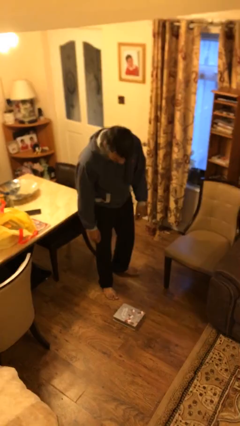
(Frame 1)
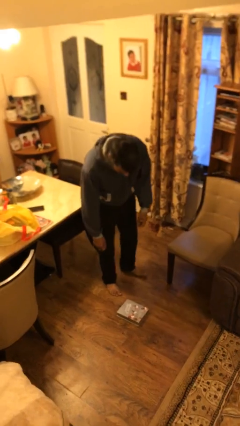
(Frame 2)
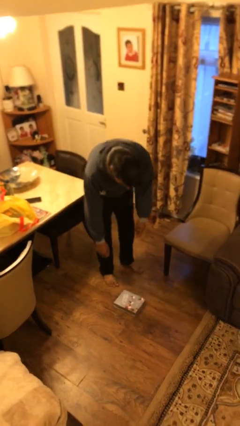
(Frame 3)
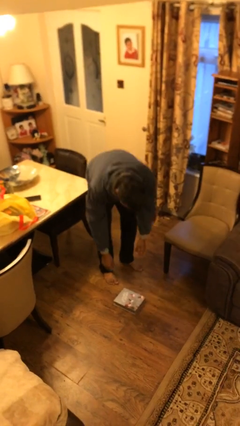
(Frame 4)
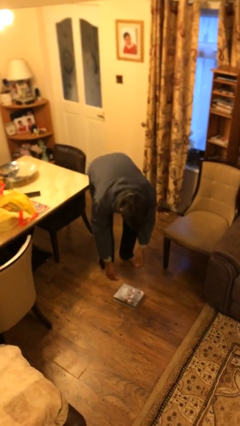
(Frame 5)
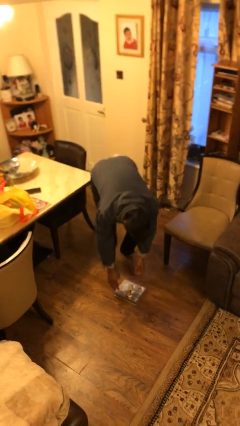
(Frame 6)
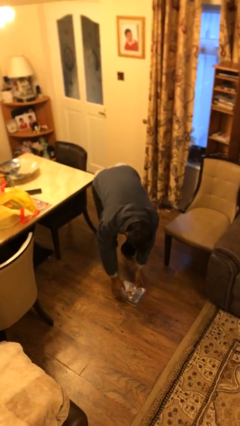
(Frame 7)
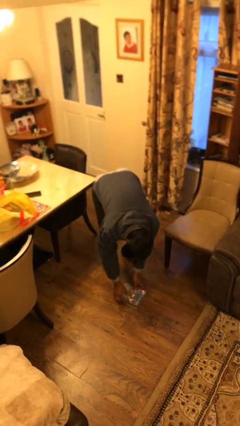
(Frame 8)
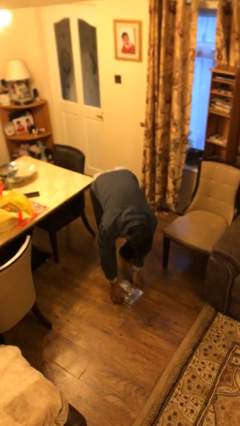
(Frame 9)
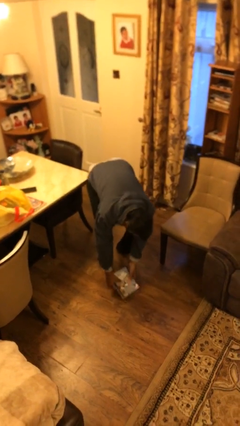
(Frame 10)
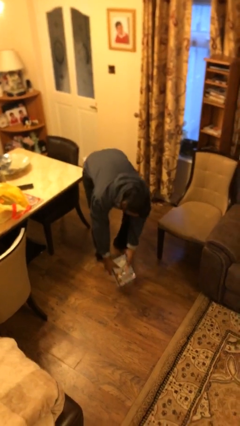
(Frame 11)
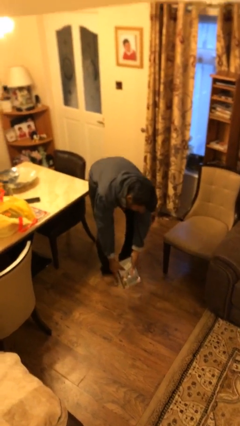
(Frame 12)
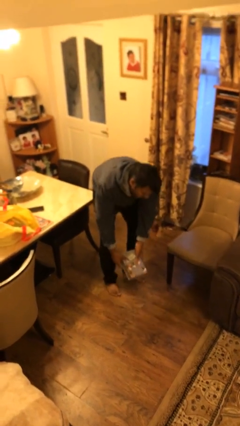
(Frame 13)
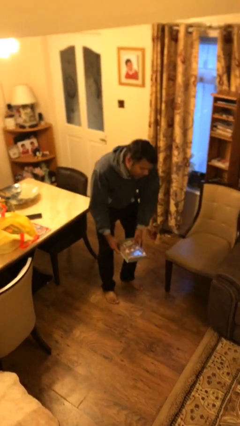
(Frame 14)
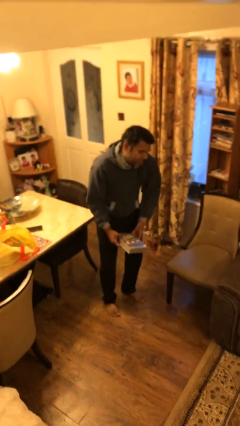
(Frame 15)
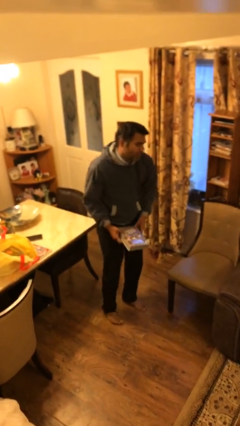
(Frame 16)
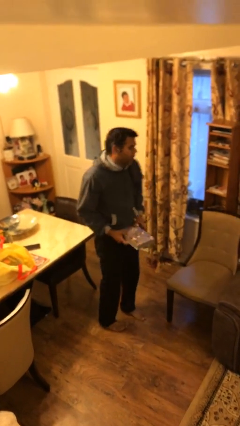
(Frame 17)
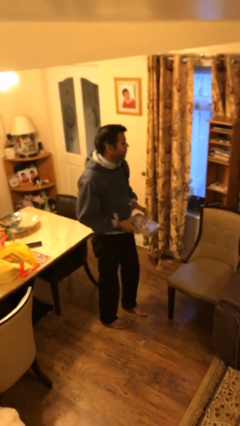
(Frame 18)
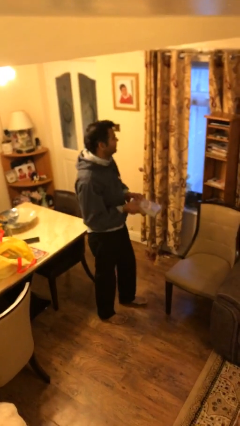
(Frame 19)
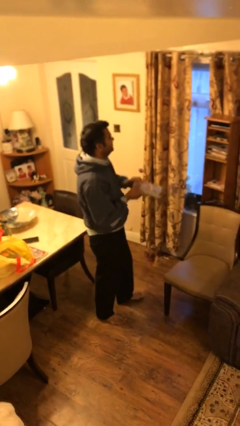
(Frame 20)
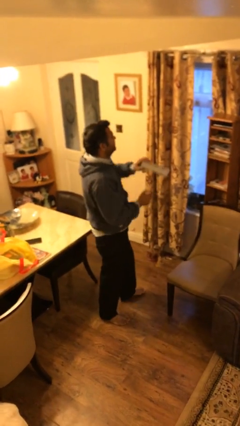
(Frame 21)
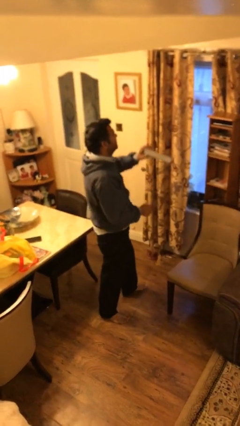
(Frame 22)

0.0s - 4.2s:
person picks up object from floor

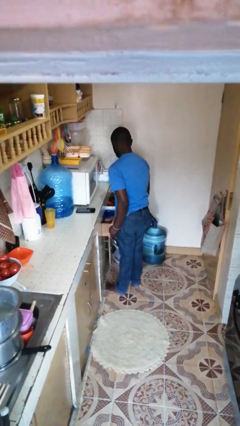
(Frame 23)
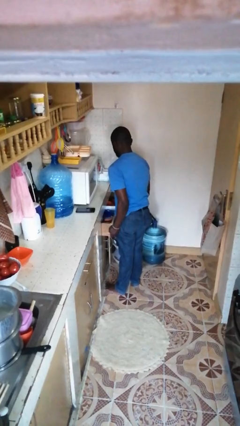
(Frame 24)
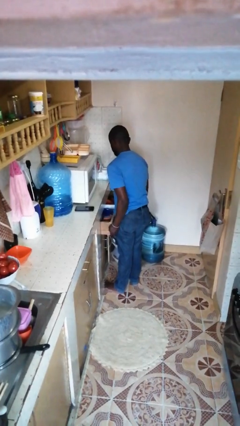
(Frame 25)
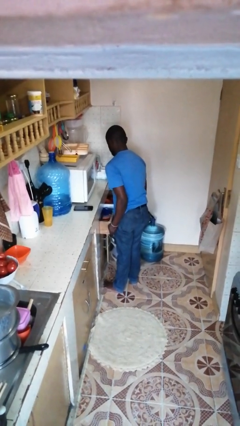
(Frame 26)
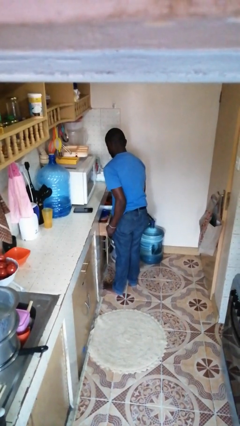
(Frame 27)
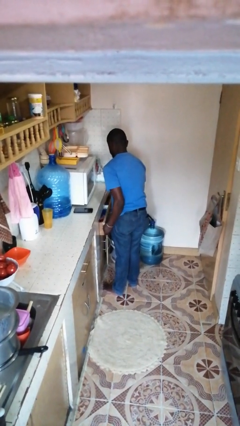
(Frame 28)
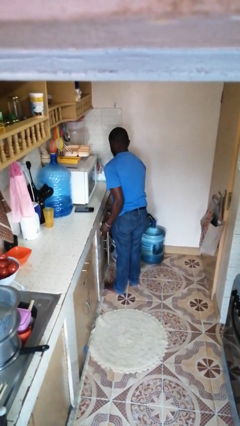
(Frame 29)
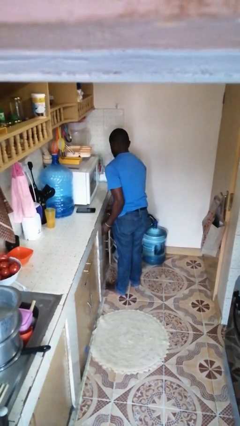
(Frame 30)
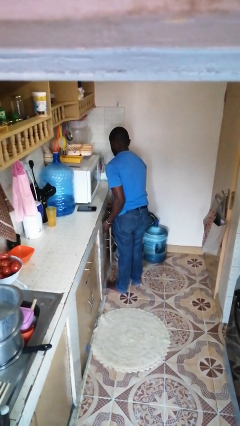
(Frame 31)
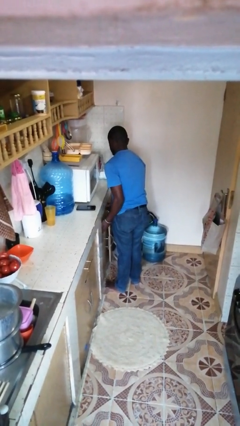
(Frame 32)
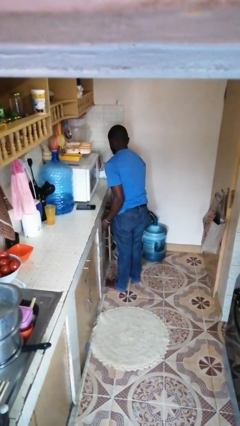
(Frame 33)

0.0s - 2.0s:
person closes kitchen drawer

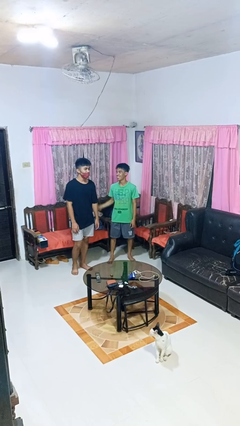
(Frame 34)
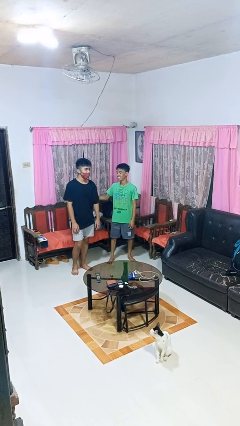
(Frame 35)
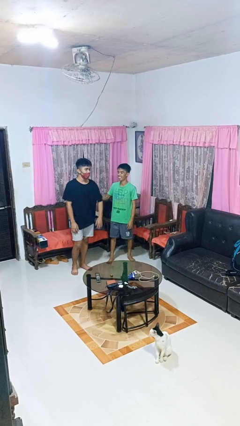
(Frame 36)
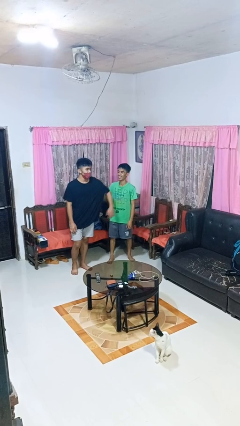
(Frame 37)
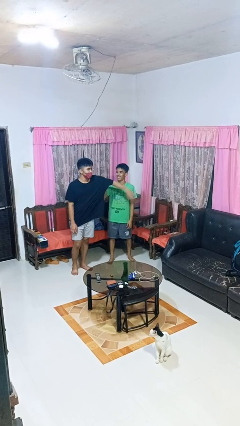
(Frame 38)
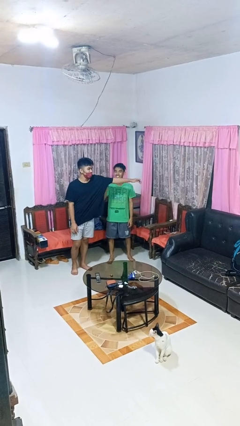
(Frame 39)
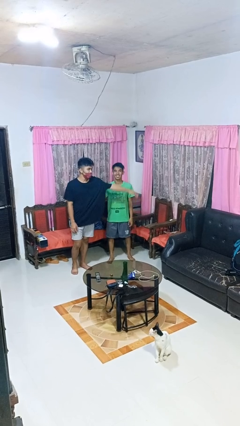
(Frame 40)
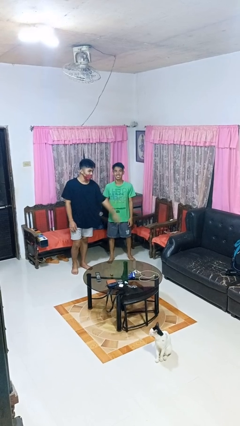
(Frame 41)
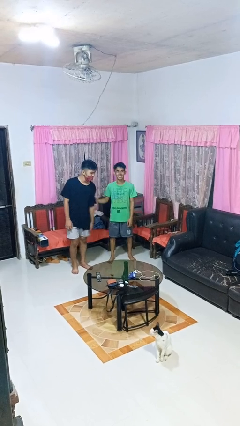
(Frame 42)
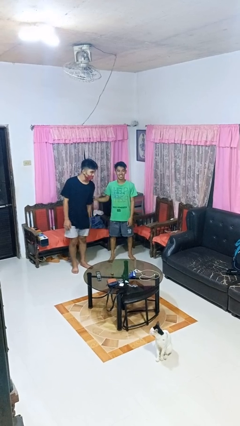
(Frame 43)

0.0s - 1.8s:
person grabs person by bicep

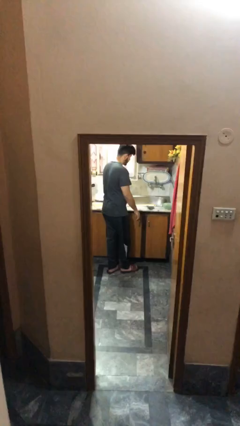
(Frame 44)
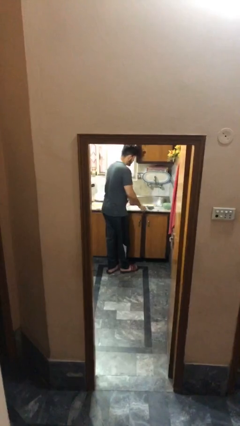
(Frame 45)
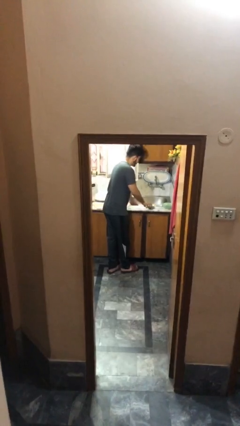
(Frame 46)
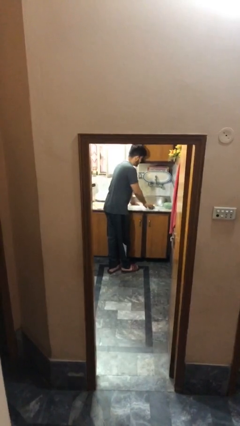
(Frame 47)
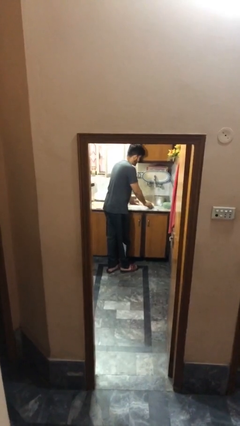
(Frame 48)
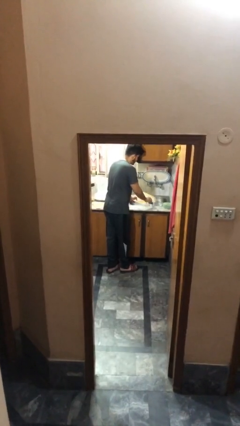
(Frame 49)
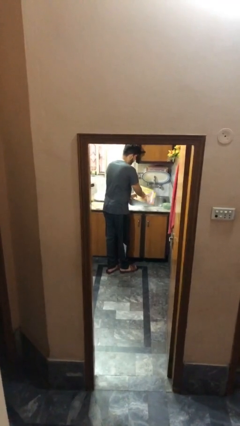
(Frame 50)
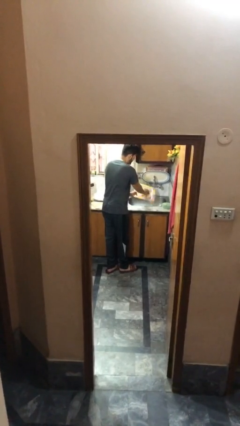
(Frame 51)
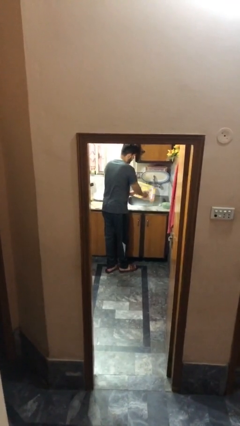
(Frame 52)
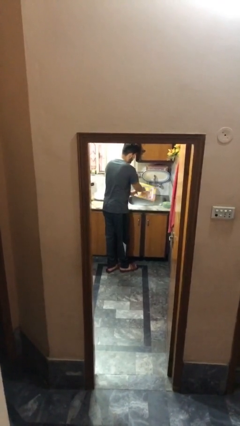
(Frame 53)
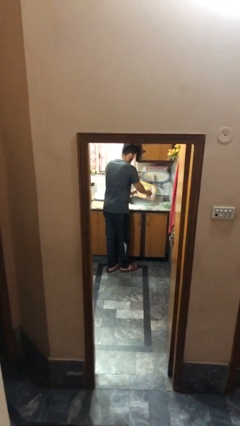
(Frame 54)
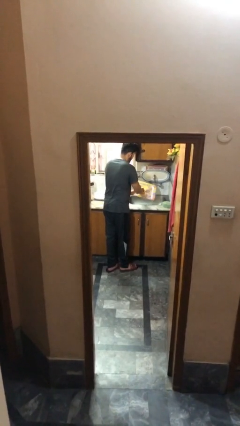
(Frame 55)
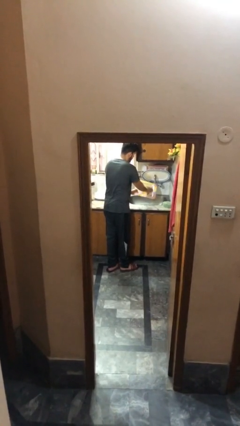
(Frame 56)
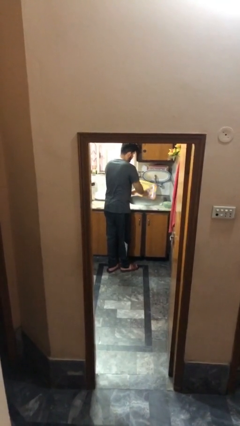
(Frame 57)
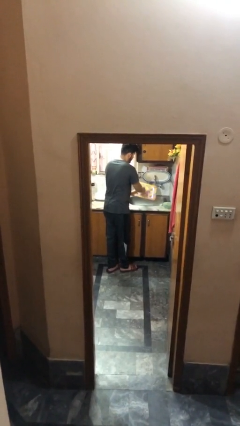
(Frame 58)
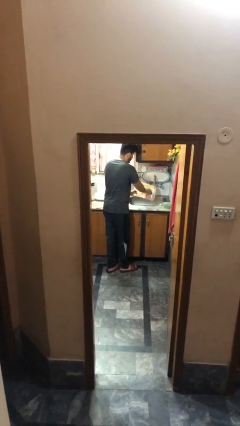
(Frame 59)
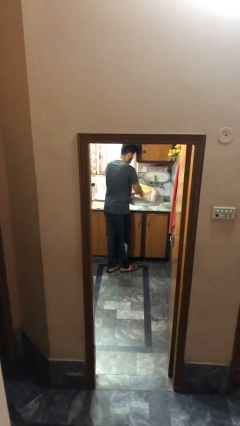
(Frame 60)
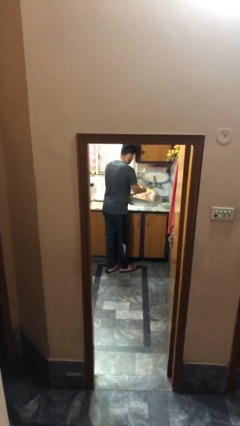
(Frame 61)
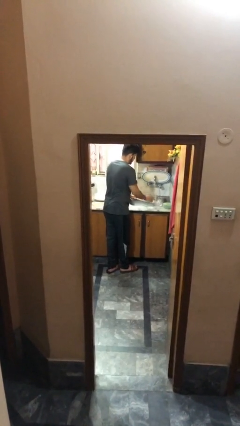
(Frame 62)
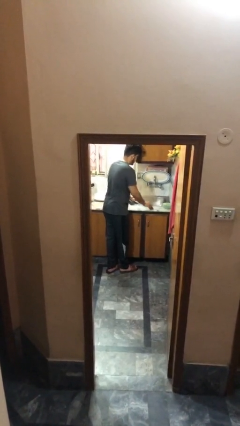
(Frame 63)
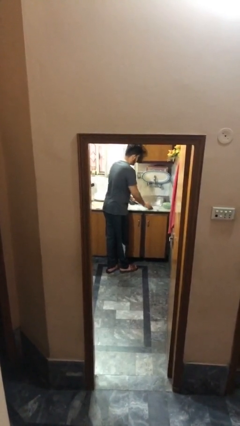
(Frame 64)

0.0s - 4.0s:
person washes dish

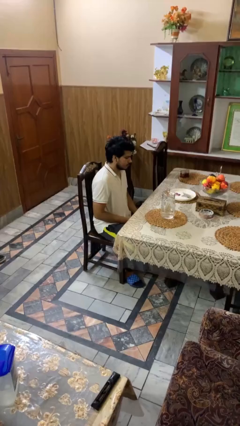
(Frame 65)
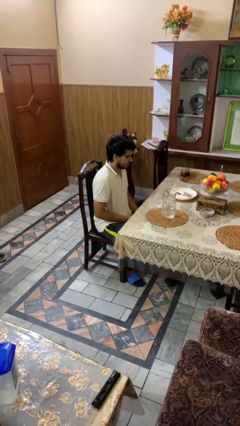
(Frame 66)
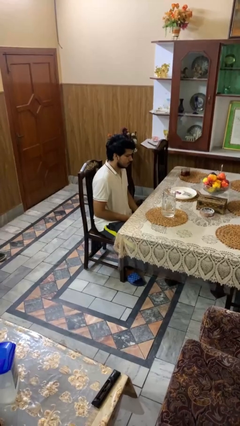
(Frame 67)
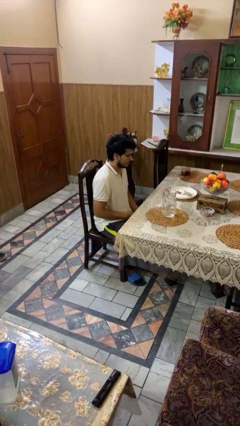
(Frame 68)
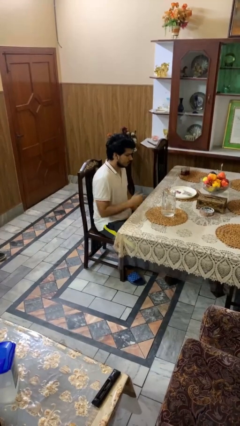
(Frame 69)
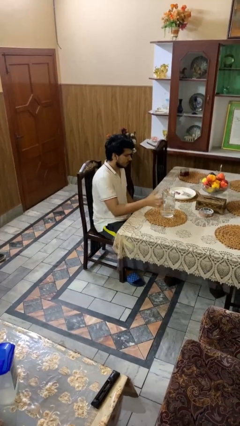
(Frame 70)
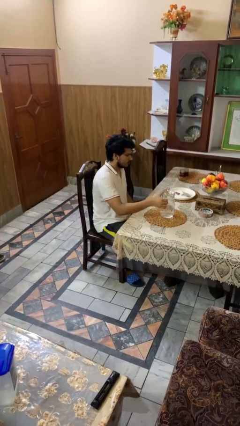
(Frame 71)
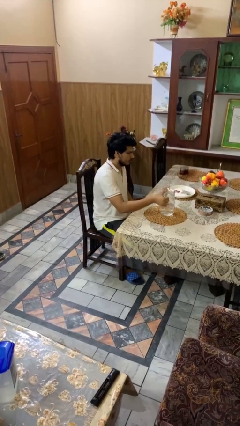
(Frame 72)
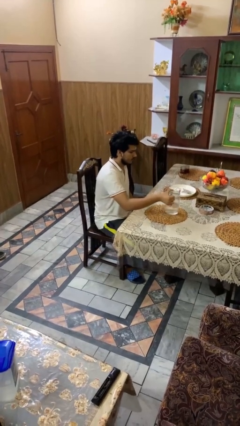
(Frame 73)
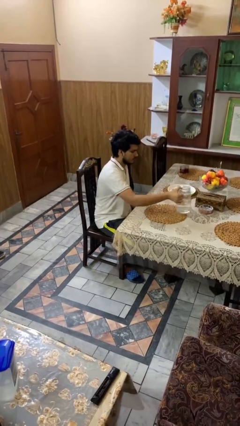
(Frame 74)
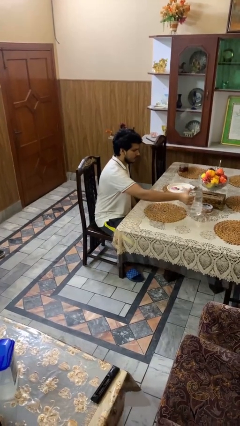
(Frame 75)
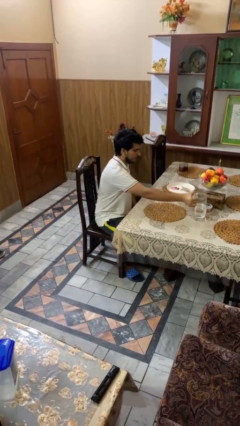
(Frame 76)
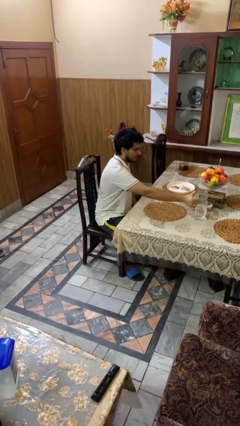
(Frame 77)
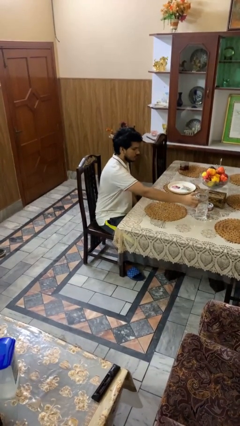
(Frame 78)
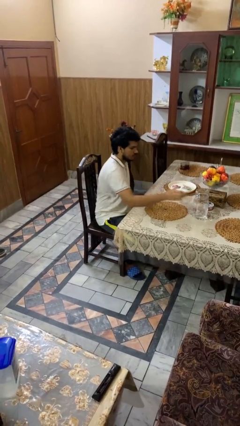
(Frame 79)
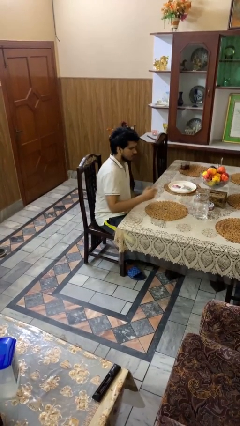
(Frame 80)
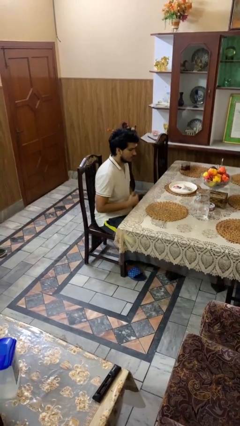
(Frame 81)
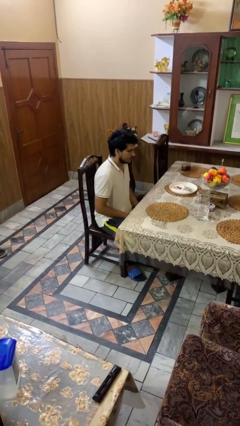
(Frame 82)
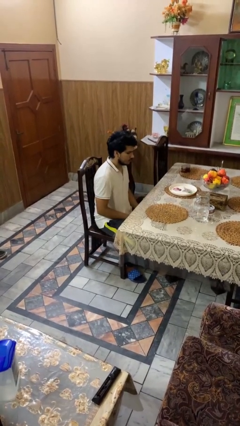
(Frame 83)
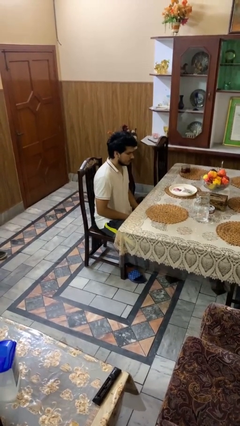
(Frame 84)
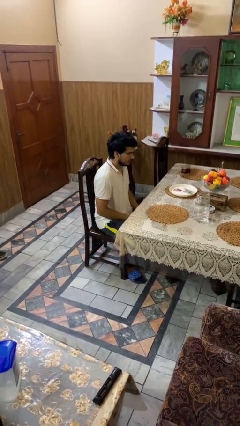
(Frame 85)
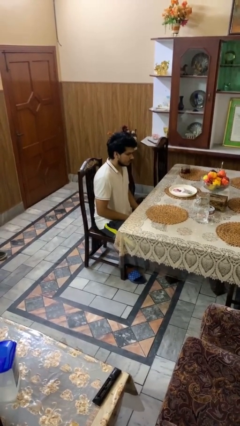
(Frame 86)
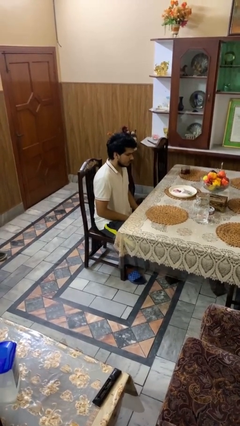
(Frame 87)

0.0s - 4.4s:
person sets table

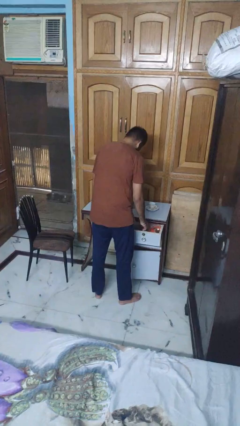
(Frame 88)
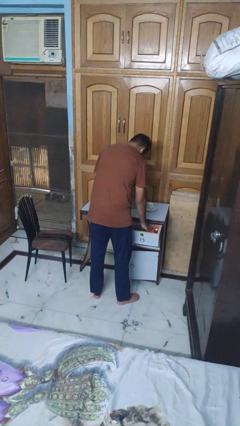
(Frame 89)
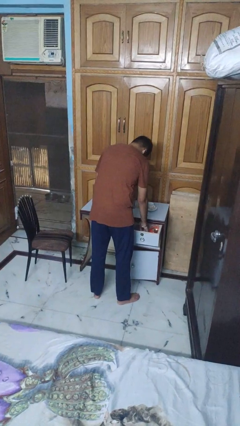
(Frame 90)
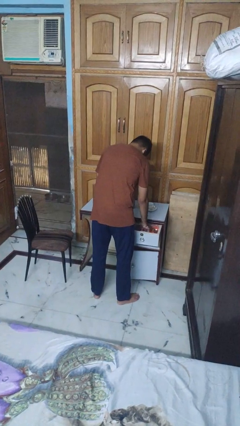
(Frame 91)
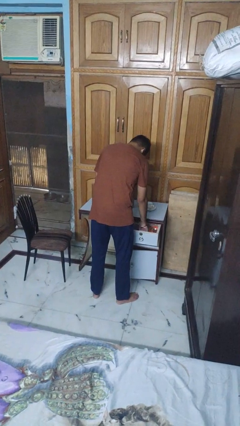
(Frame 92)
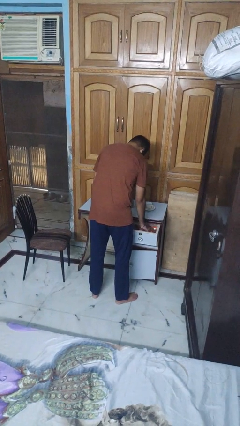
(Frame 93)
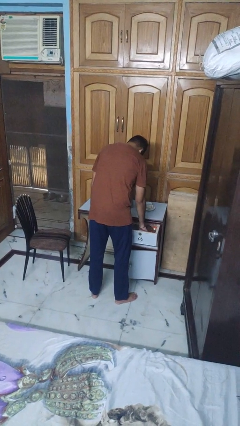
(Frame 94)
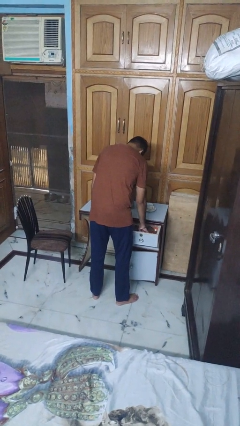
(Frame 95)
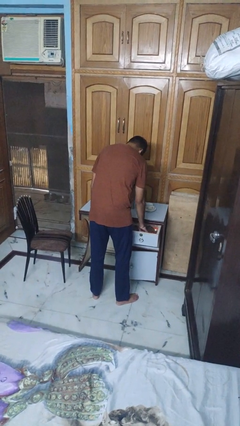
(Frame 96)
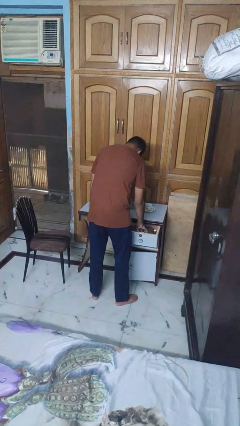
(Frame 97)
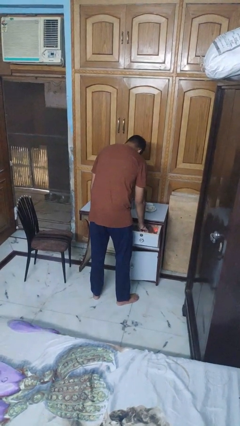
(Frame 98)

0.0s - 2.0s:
person searches in kitchen drawer
